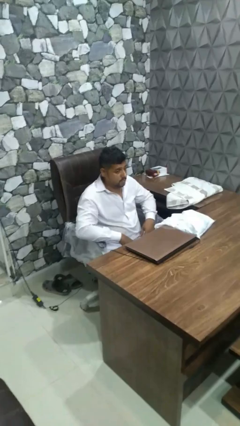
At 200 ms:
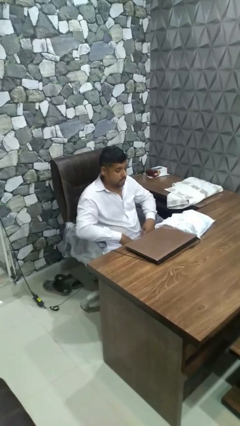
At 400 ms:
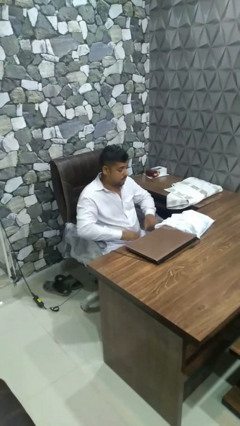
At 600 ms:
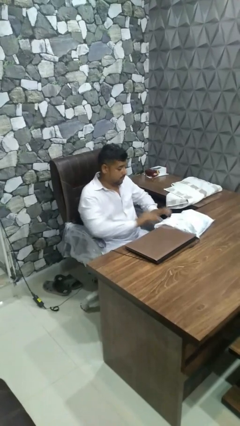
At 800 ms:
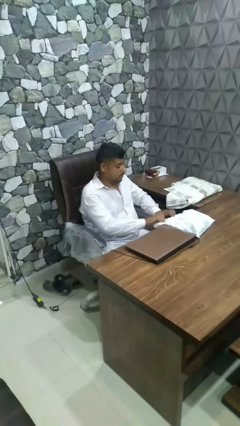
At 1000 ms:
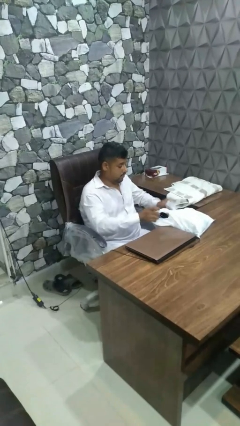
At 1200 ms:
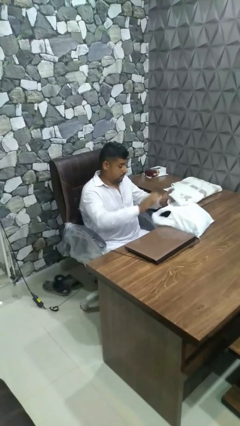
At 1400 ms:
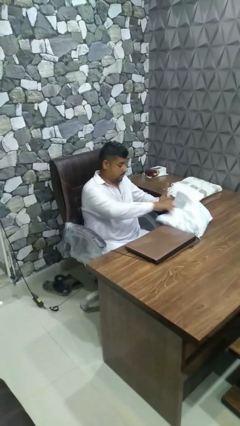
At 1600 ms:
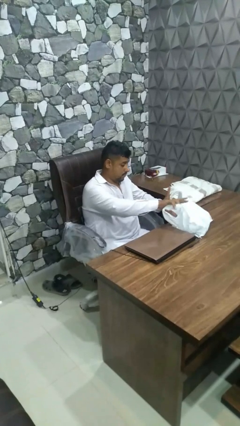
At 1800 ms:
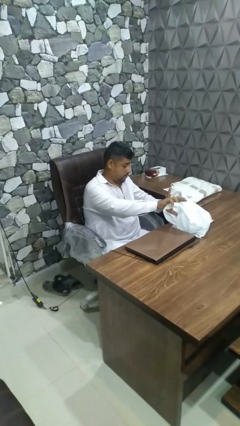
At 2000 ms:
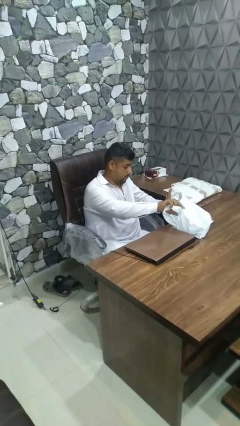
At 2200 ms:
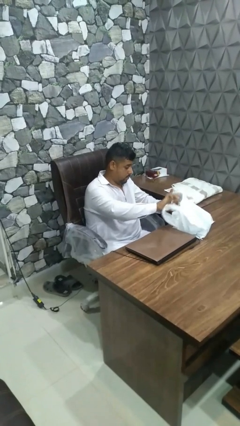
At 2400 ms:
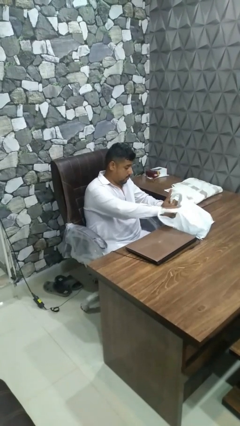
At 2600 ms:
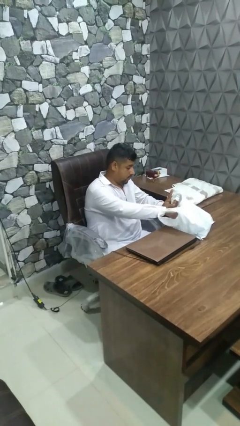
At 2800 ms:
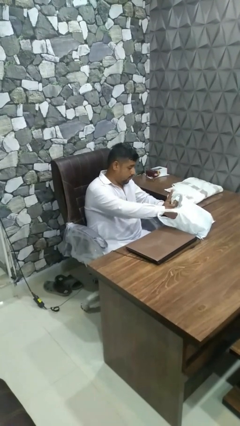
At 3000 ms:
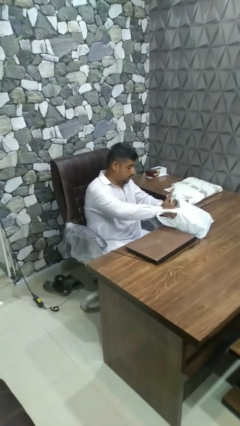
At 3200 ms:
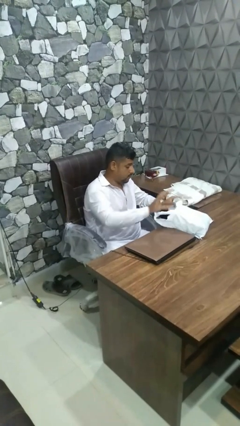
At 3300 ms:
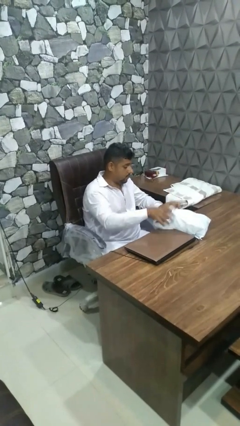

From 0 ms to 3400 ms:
person searches in bag

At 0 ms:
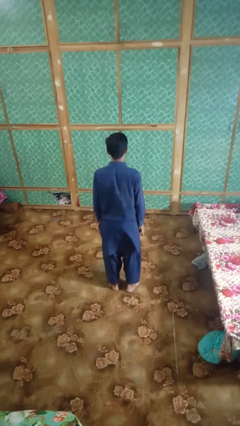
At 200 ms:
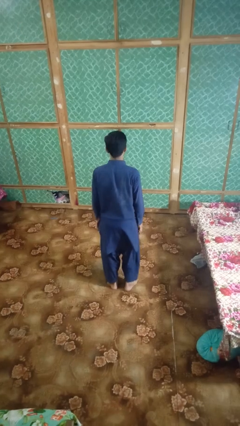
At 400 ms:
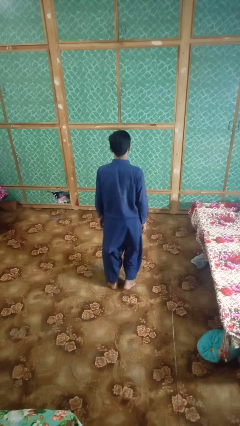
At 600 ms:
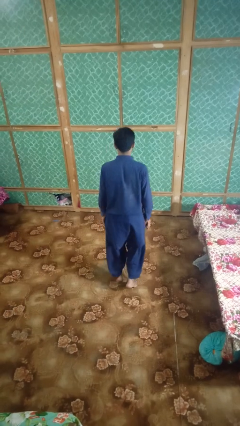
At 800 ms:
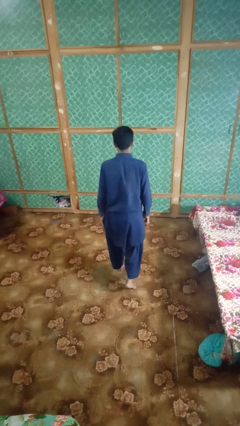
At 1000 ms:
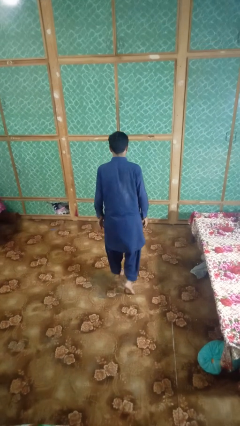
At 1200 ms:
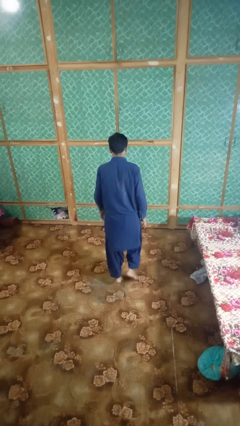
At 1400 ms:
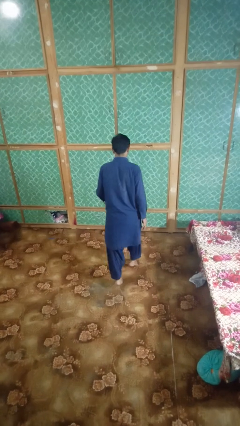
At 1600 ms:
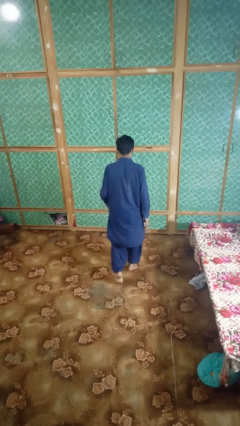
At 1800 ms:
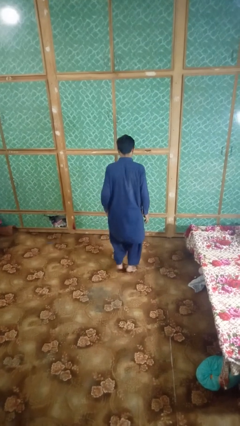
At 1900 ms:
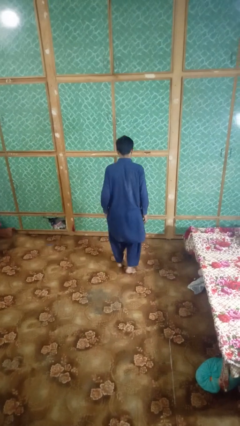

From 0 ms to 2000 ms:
person walks tiptoe

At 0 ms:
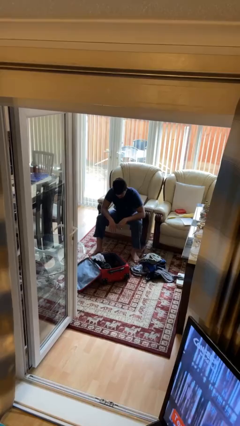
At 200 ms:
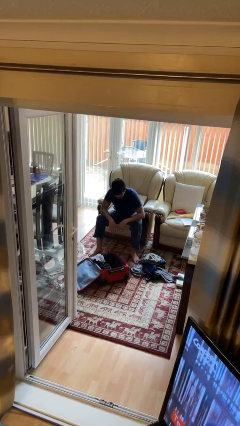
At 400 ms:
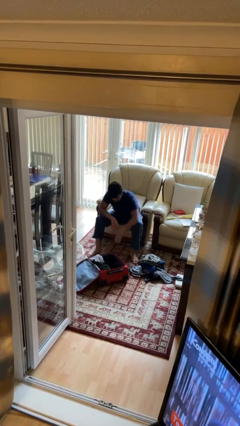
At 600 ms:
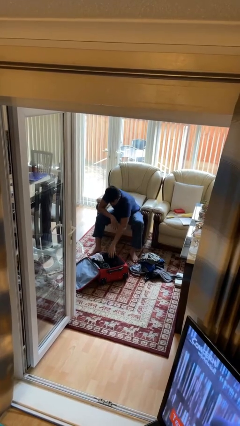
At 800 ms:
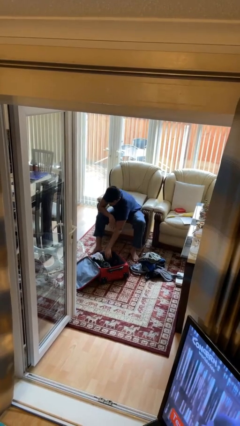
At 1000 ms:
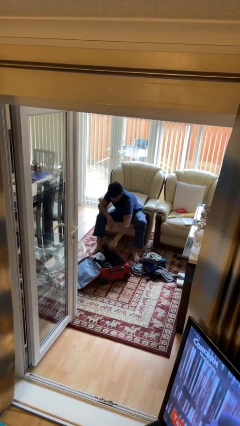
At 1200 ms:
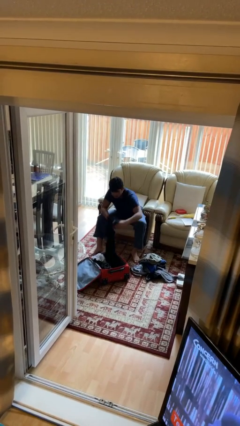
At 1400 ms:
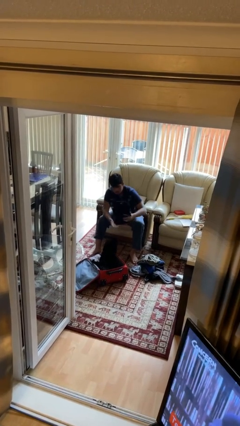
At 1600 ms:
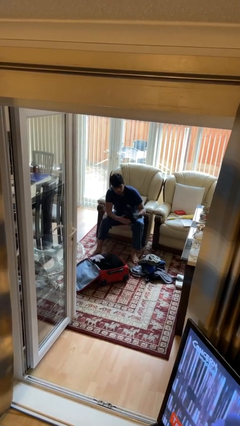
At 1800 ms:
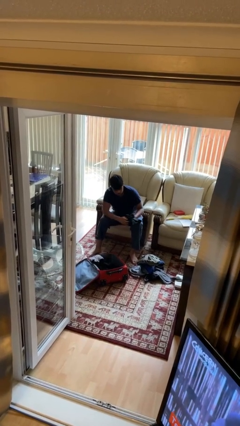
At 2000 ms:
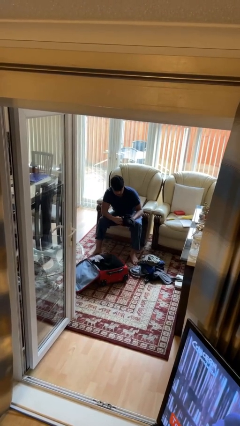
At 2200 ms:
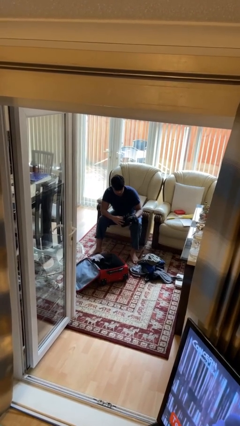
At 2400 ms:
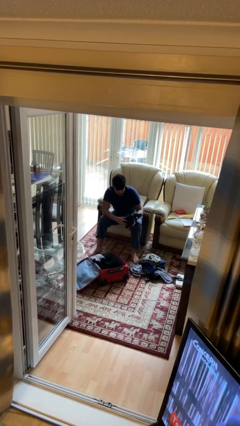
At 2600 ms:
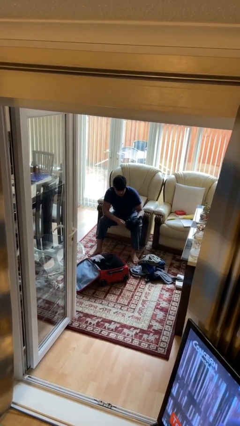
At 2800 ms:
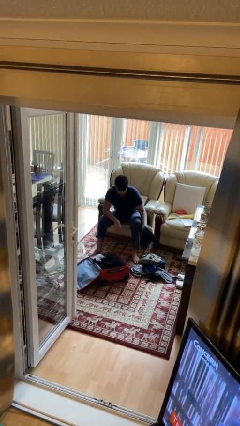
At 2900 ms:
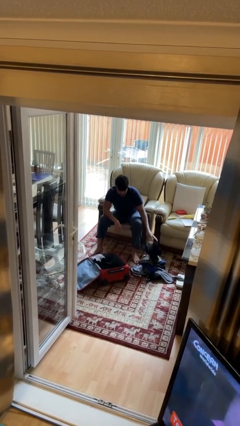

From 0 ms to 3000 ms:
person unloads clothes from suitcase

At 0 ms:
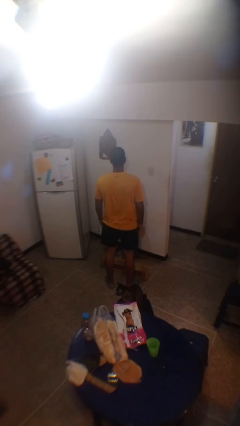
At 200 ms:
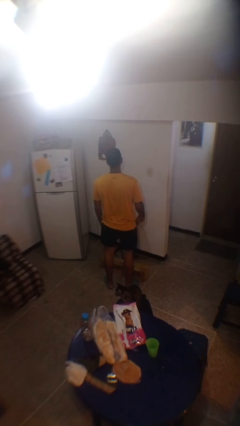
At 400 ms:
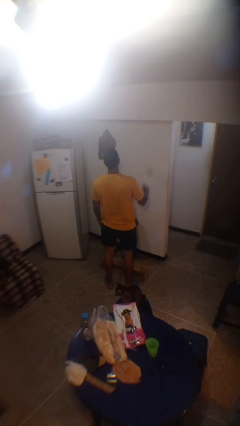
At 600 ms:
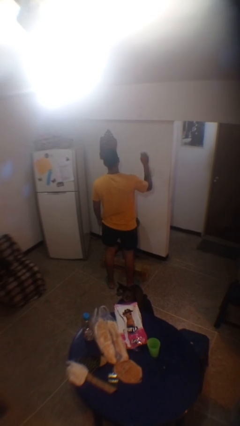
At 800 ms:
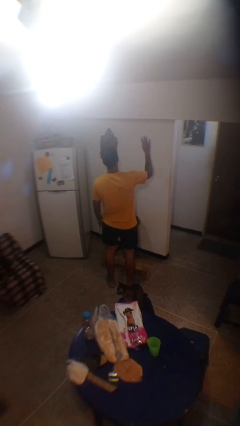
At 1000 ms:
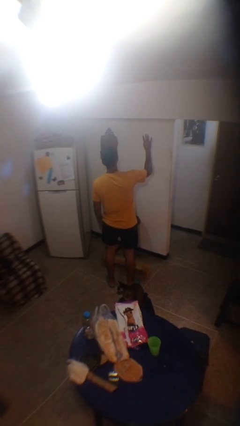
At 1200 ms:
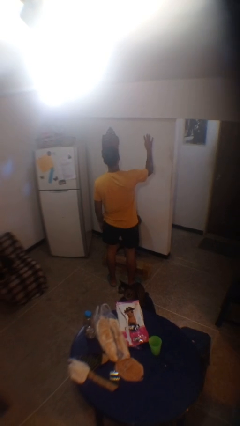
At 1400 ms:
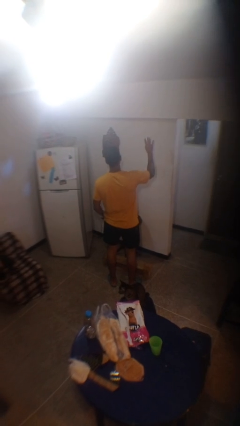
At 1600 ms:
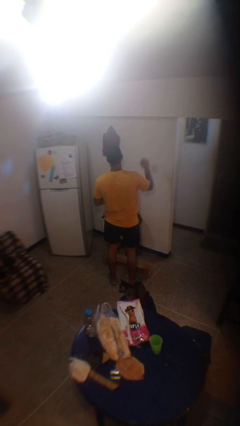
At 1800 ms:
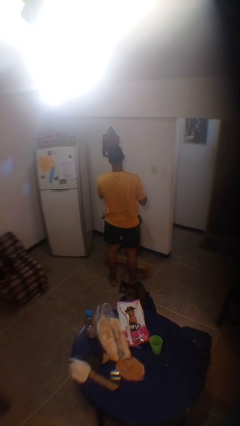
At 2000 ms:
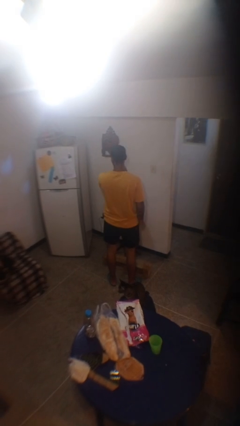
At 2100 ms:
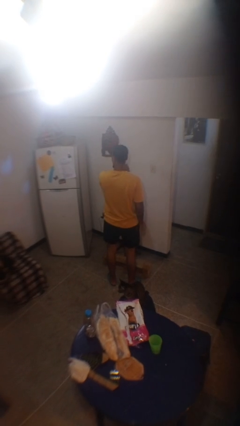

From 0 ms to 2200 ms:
person gestures number four

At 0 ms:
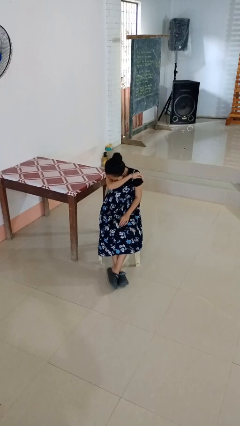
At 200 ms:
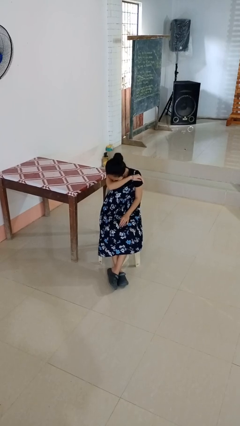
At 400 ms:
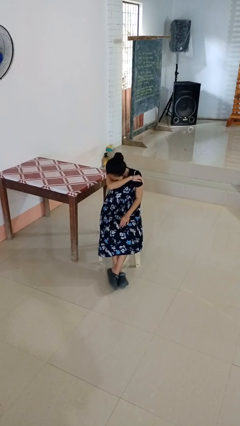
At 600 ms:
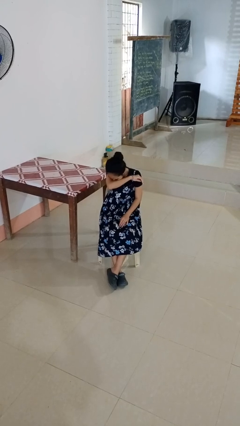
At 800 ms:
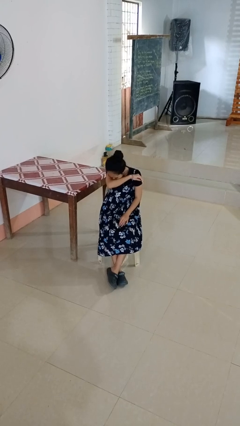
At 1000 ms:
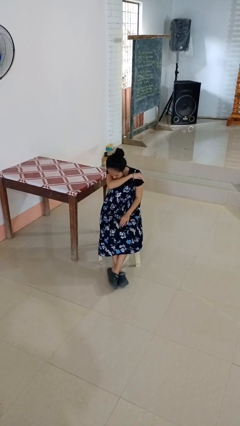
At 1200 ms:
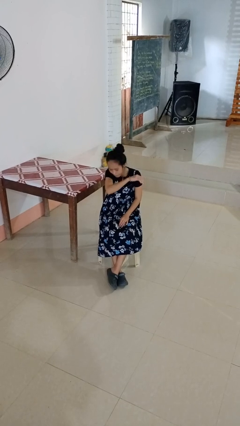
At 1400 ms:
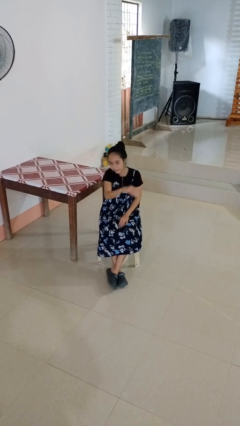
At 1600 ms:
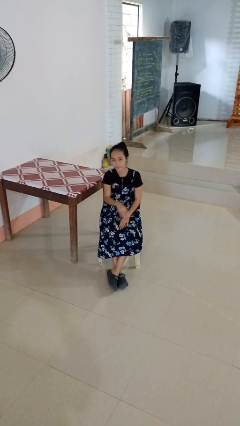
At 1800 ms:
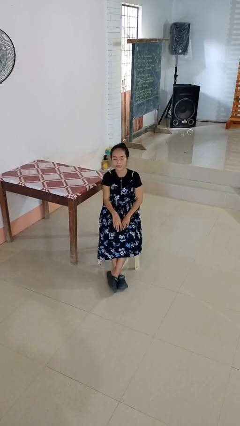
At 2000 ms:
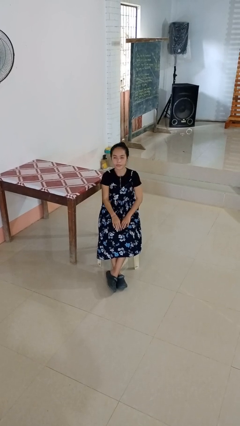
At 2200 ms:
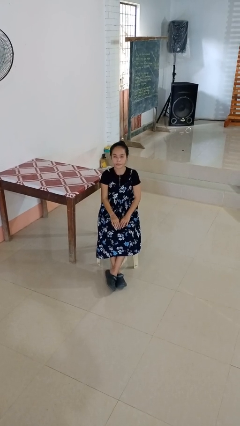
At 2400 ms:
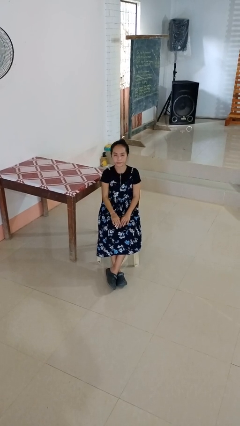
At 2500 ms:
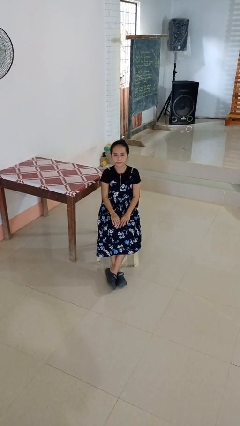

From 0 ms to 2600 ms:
person sneezes into arm

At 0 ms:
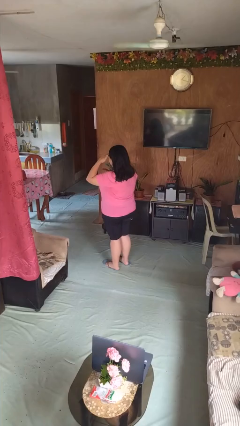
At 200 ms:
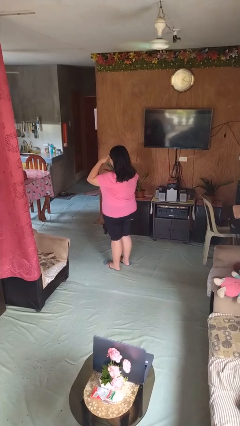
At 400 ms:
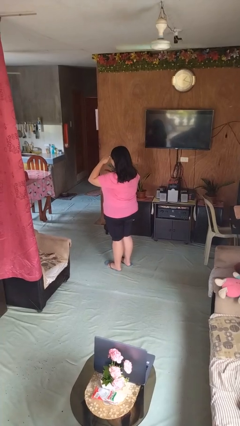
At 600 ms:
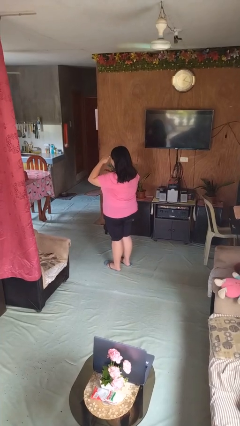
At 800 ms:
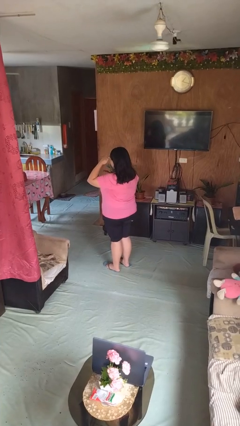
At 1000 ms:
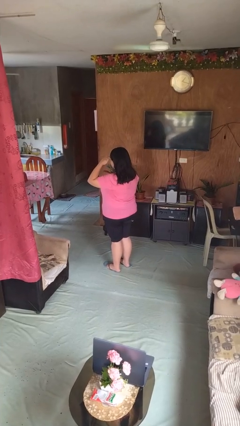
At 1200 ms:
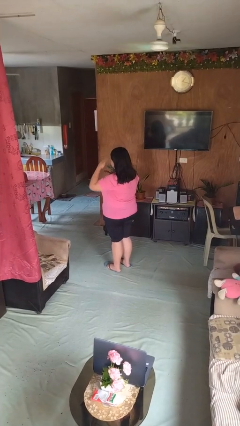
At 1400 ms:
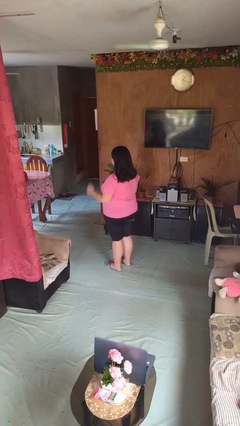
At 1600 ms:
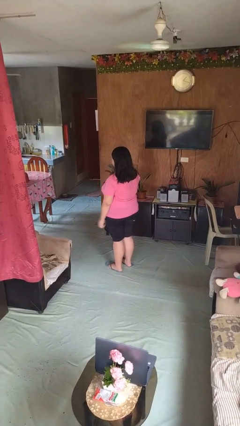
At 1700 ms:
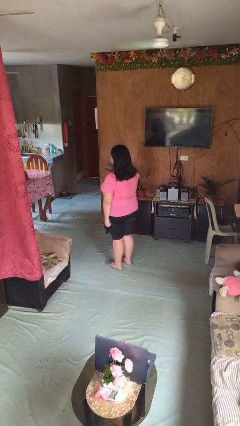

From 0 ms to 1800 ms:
person salutes

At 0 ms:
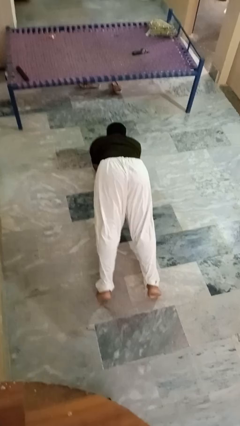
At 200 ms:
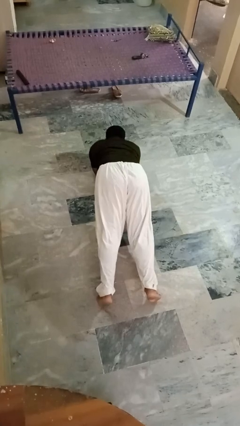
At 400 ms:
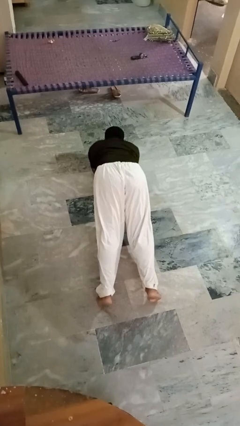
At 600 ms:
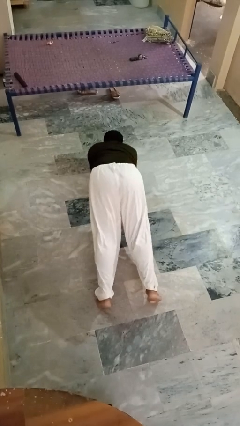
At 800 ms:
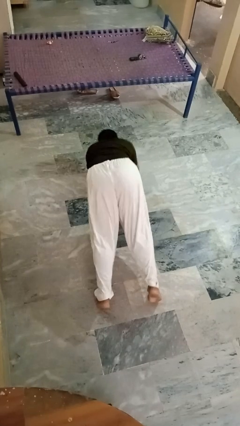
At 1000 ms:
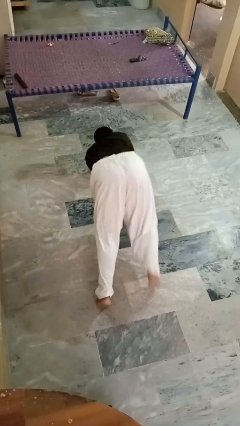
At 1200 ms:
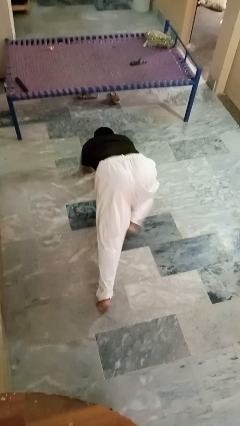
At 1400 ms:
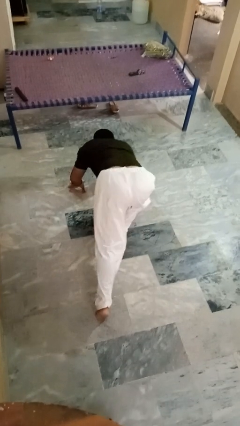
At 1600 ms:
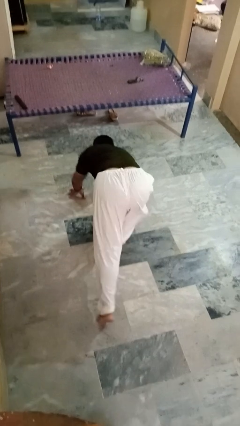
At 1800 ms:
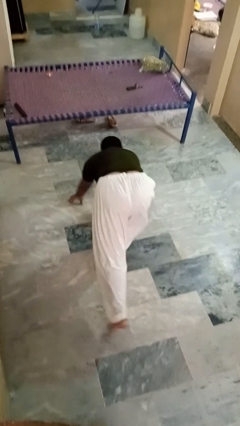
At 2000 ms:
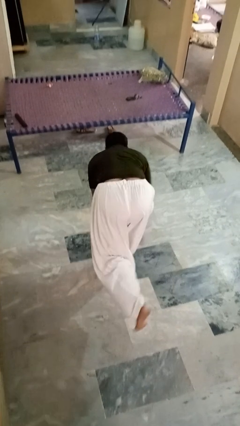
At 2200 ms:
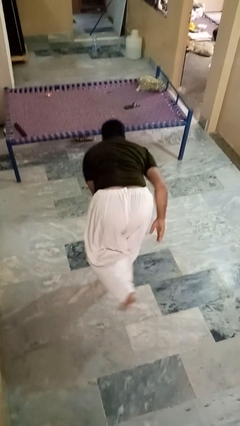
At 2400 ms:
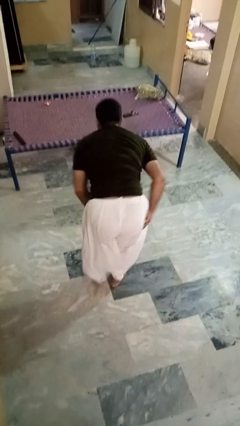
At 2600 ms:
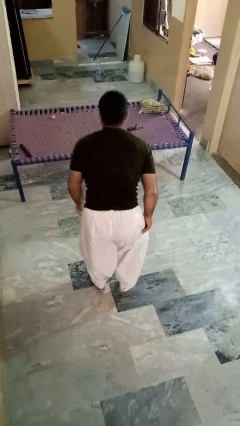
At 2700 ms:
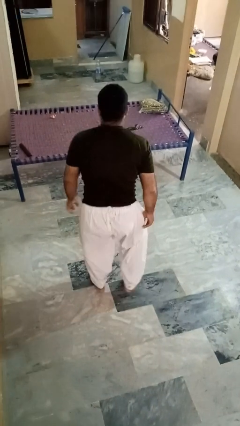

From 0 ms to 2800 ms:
person stands up from floor
